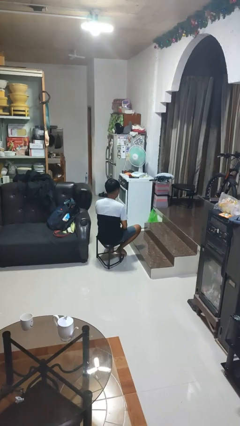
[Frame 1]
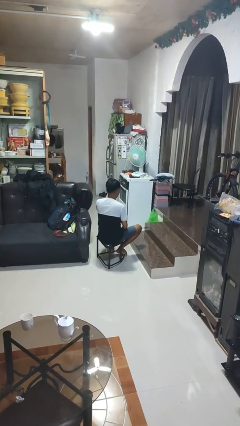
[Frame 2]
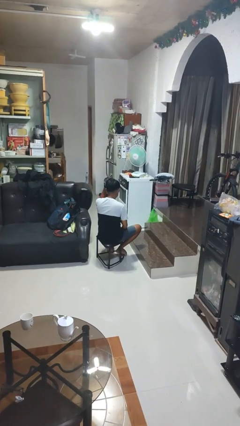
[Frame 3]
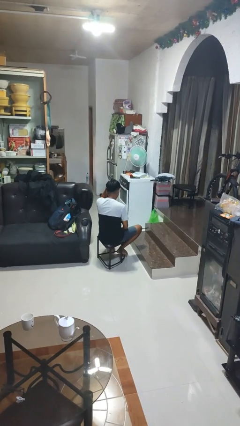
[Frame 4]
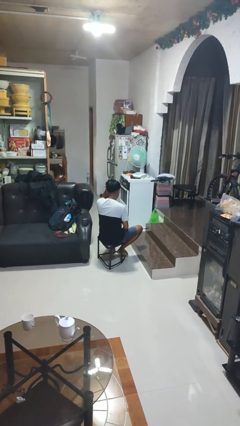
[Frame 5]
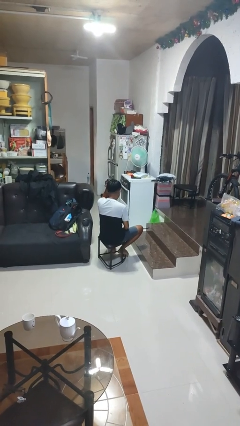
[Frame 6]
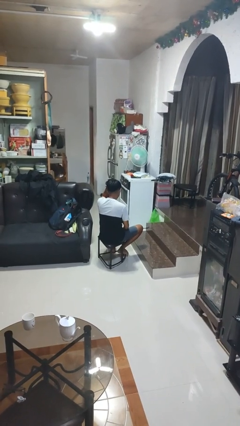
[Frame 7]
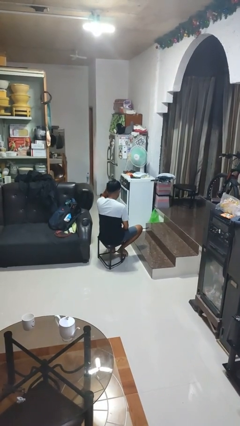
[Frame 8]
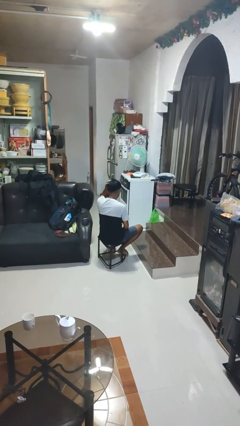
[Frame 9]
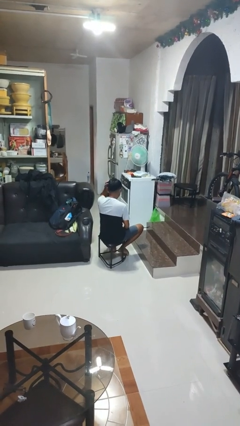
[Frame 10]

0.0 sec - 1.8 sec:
person pats head

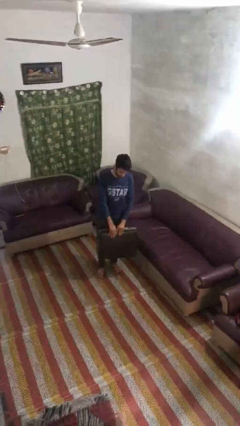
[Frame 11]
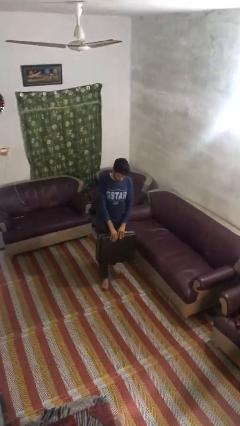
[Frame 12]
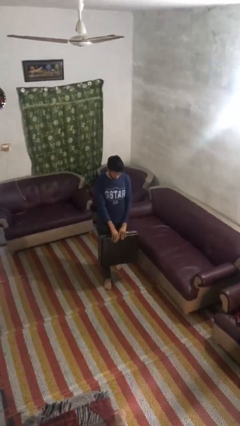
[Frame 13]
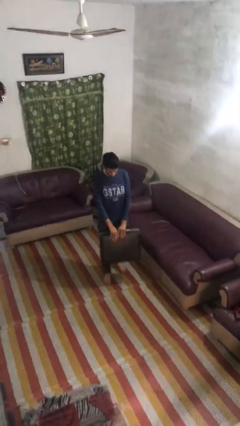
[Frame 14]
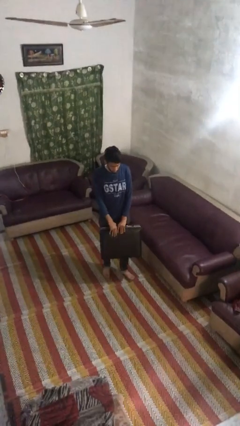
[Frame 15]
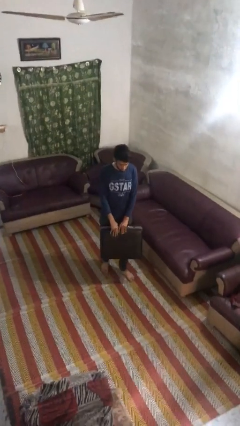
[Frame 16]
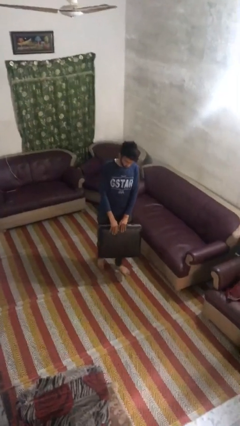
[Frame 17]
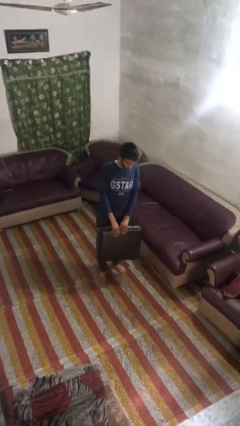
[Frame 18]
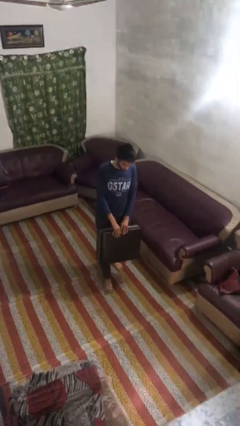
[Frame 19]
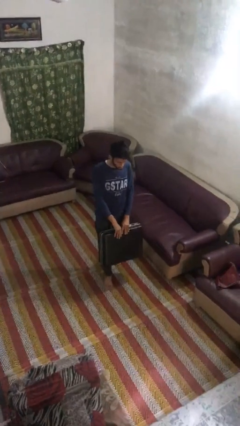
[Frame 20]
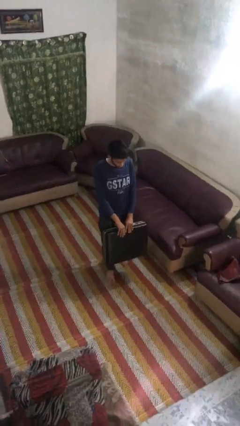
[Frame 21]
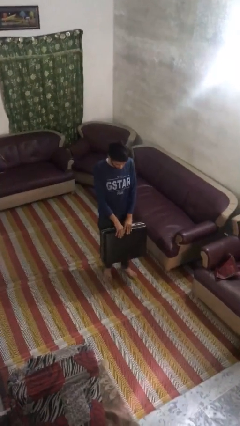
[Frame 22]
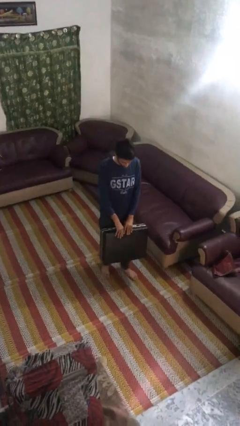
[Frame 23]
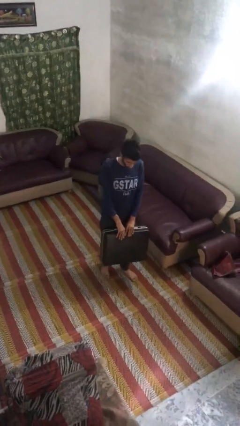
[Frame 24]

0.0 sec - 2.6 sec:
person carries heavy object

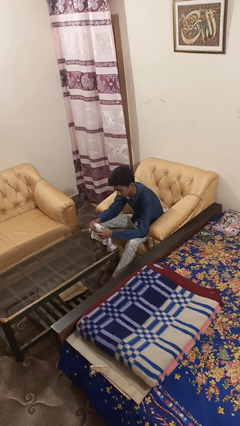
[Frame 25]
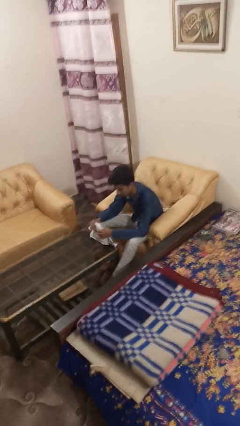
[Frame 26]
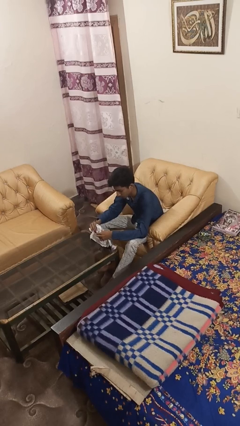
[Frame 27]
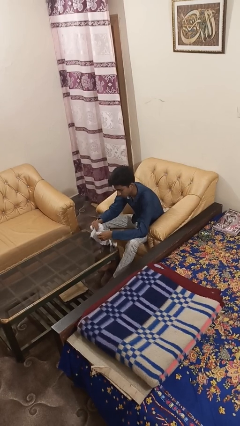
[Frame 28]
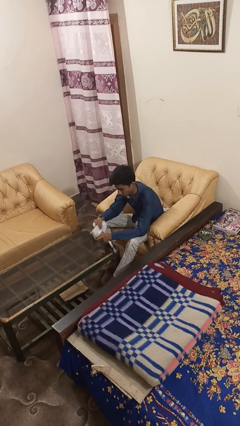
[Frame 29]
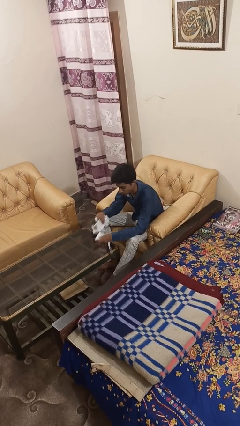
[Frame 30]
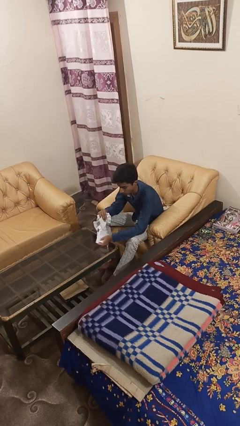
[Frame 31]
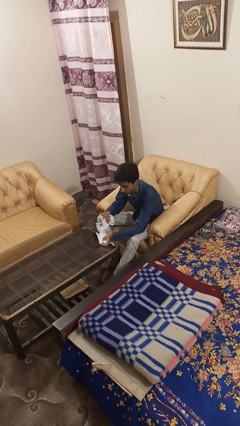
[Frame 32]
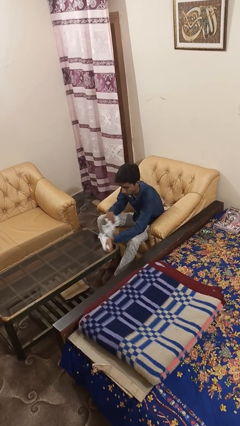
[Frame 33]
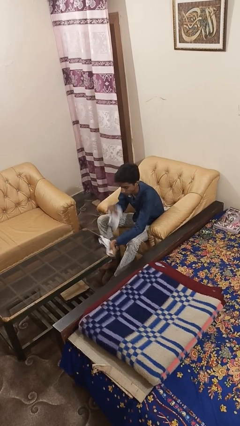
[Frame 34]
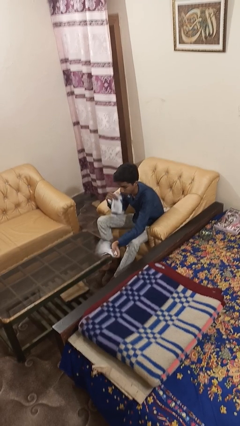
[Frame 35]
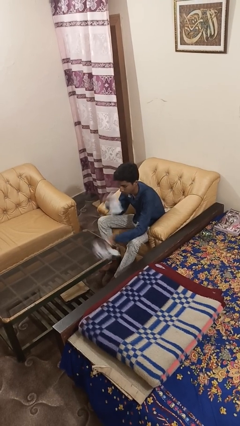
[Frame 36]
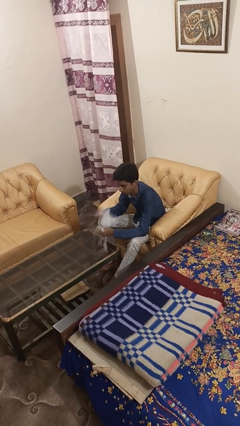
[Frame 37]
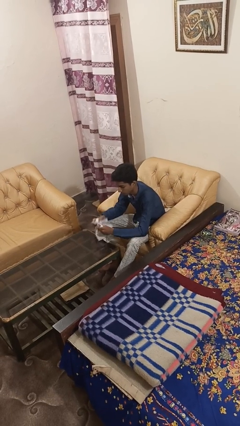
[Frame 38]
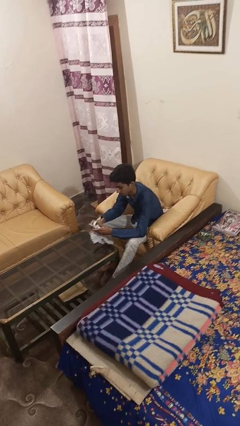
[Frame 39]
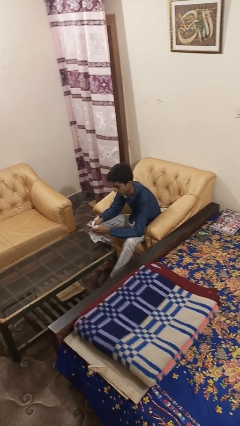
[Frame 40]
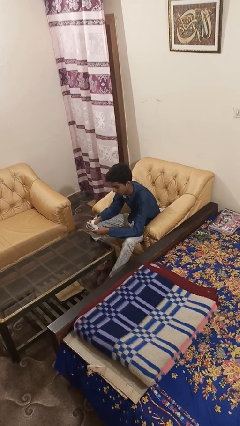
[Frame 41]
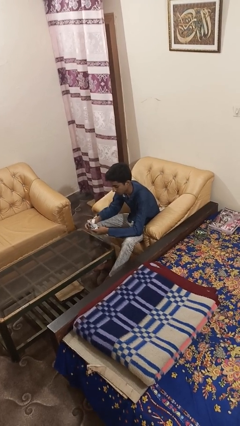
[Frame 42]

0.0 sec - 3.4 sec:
person tears paper

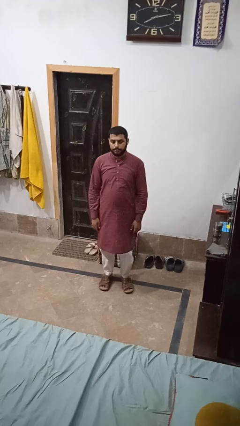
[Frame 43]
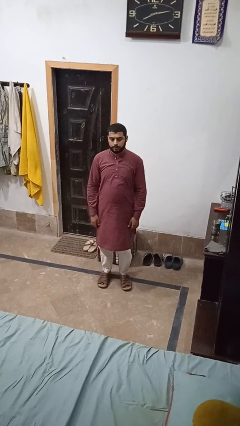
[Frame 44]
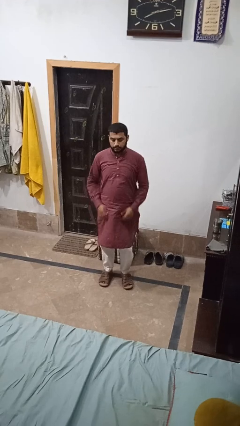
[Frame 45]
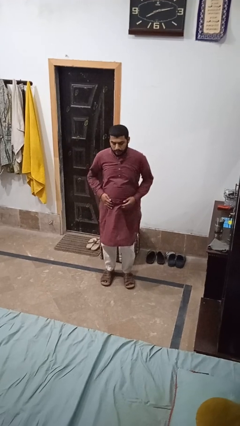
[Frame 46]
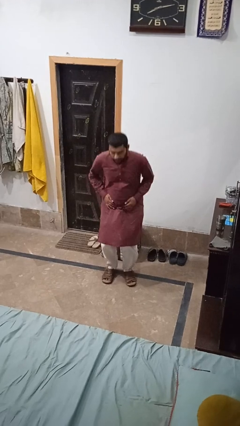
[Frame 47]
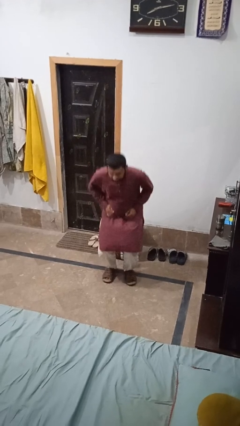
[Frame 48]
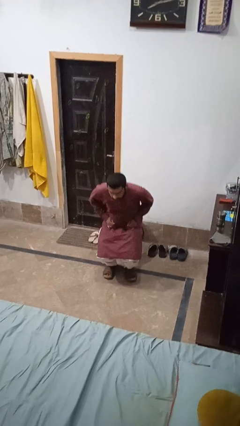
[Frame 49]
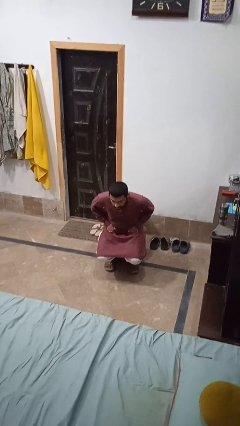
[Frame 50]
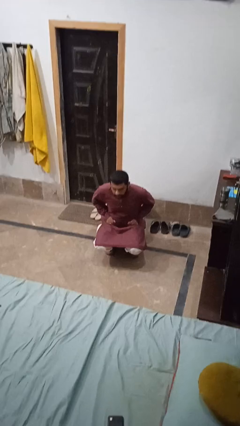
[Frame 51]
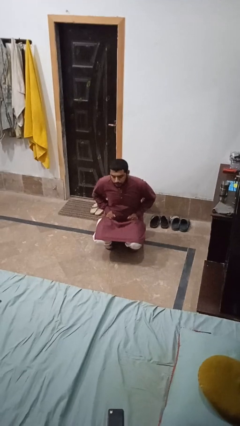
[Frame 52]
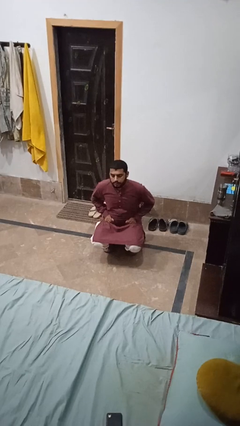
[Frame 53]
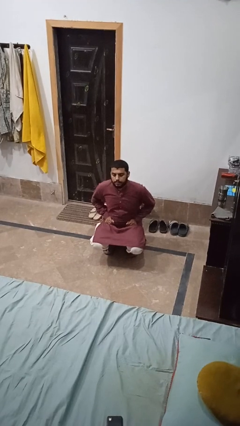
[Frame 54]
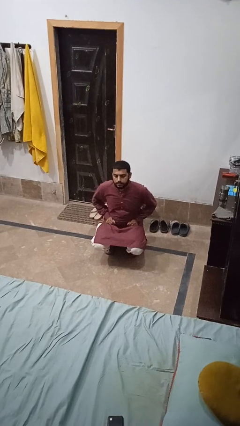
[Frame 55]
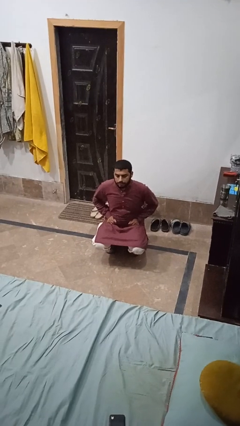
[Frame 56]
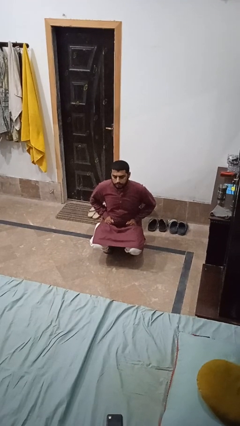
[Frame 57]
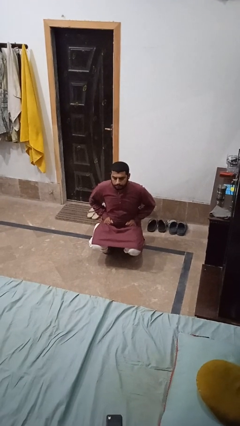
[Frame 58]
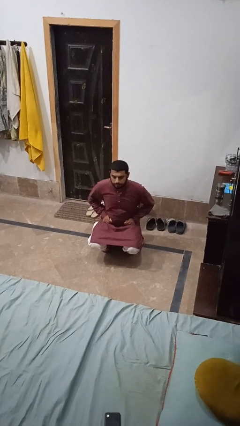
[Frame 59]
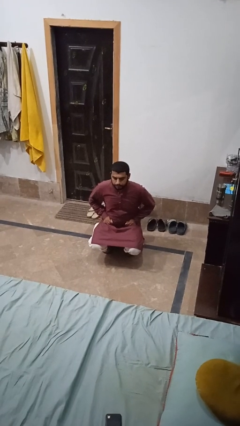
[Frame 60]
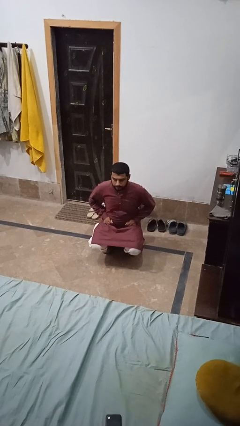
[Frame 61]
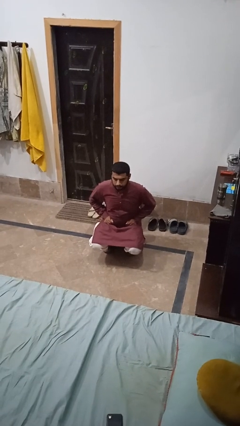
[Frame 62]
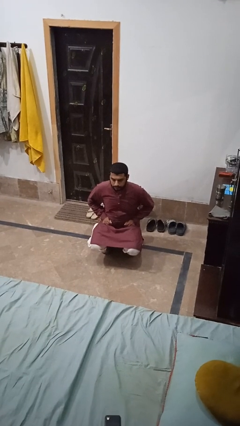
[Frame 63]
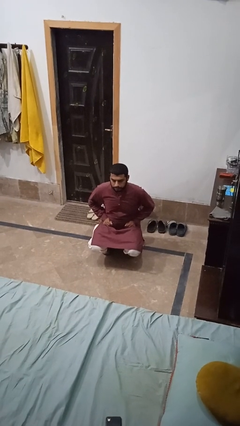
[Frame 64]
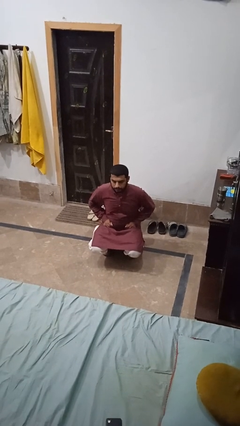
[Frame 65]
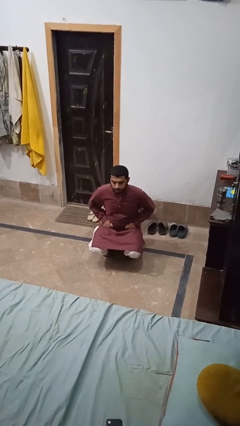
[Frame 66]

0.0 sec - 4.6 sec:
person squats

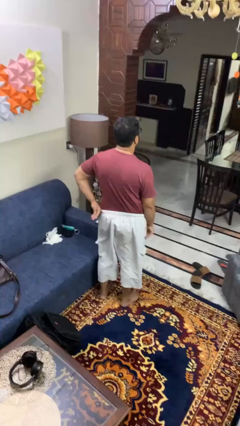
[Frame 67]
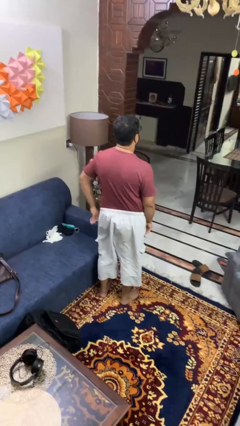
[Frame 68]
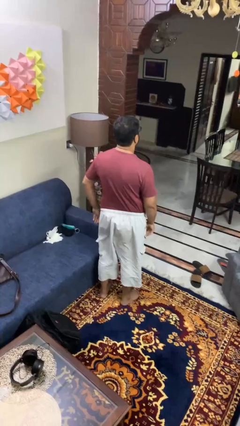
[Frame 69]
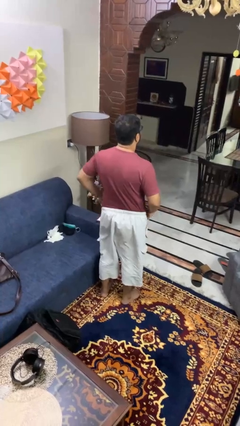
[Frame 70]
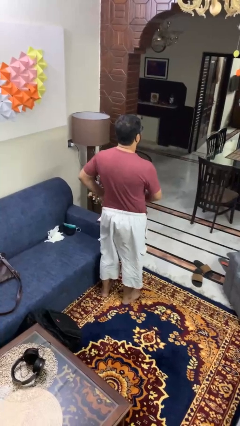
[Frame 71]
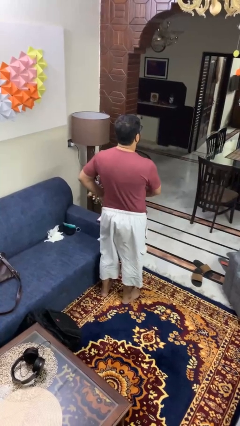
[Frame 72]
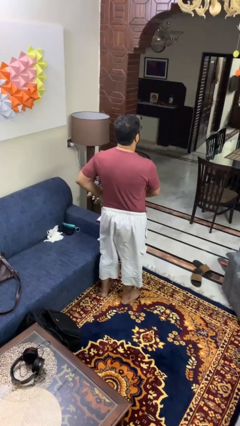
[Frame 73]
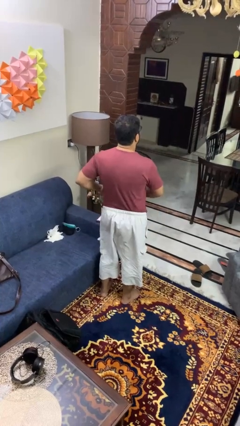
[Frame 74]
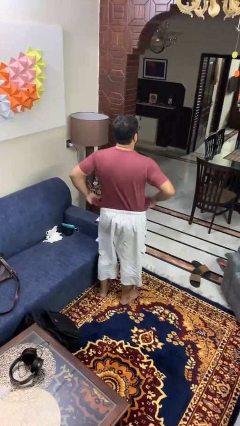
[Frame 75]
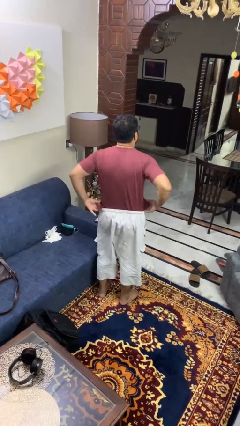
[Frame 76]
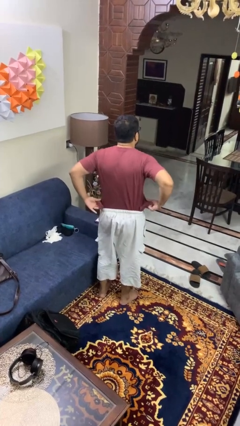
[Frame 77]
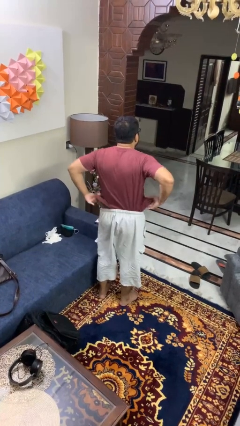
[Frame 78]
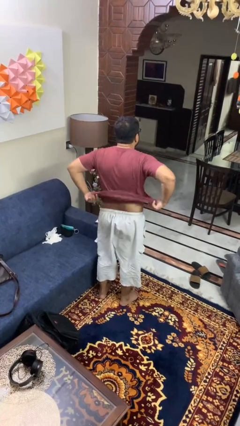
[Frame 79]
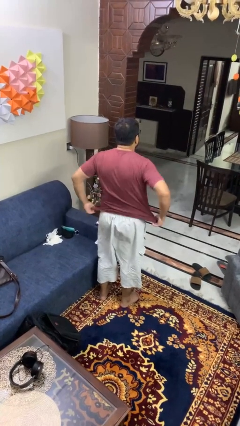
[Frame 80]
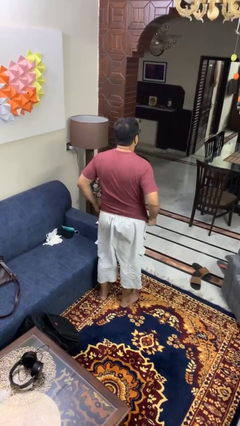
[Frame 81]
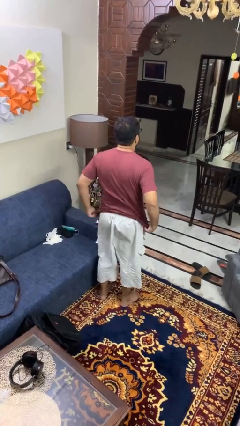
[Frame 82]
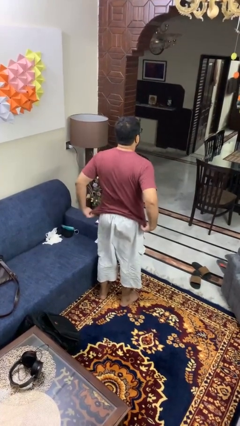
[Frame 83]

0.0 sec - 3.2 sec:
person untucks shirt

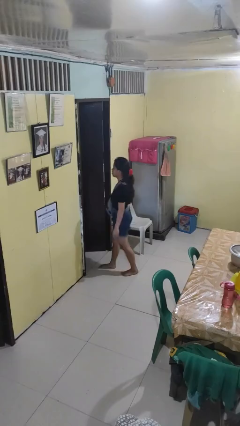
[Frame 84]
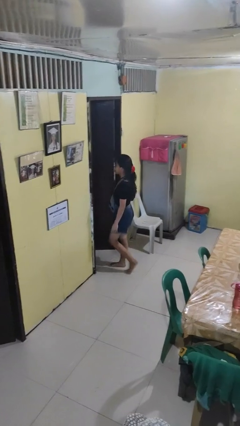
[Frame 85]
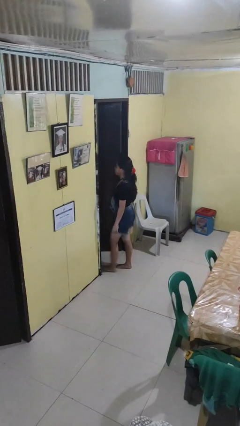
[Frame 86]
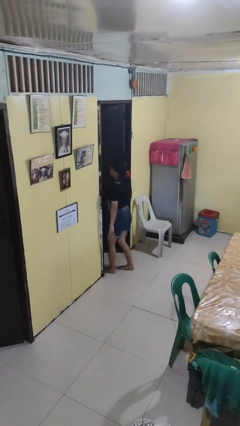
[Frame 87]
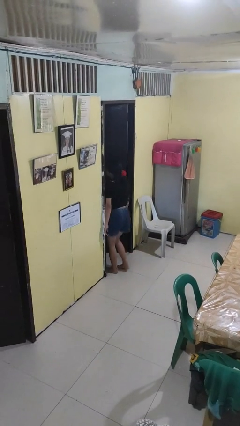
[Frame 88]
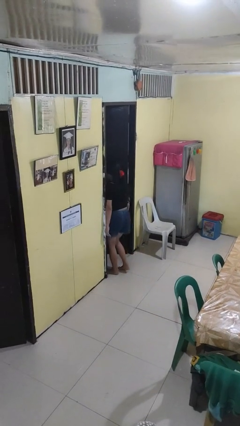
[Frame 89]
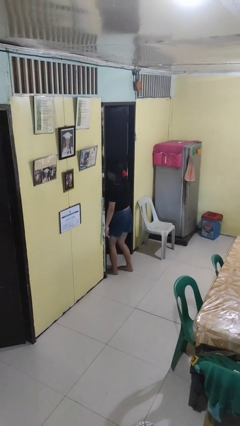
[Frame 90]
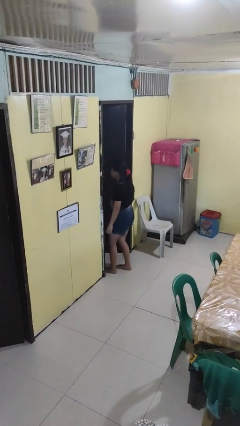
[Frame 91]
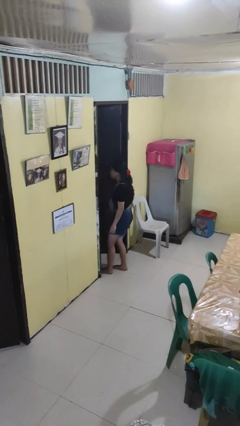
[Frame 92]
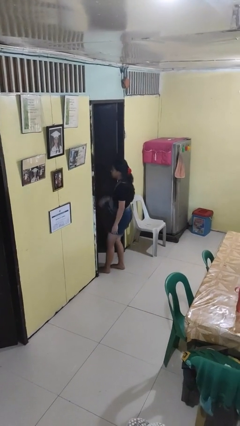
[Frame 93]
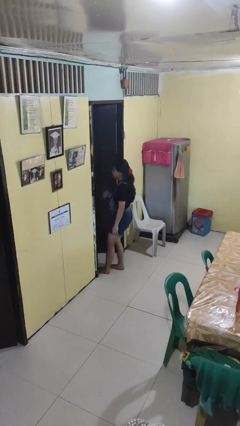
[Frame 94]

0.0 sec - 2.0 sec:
person bumps into wall
